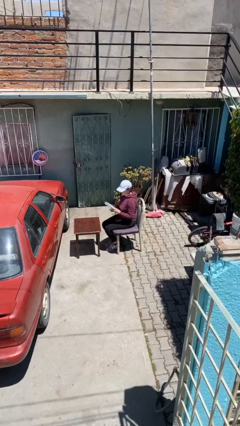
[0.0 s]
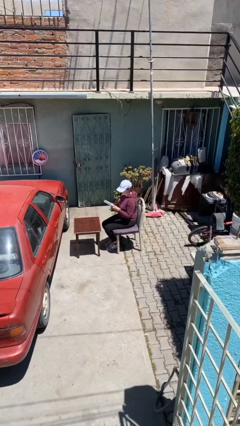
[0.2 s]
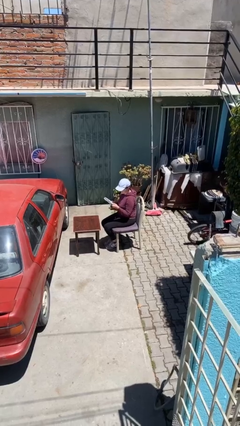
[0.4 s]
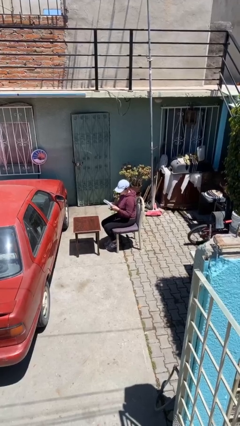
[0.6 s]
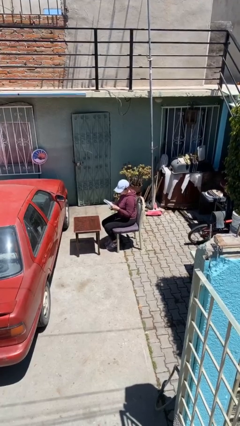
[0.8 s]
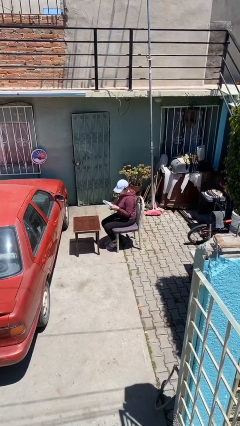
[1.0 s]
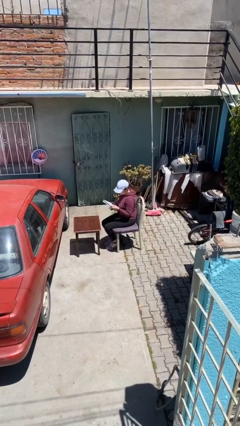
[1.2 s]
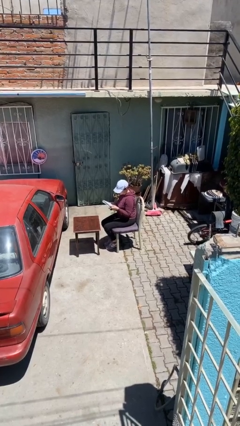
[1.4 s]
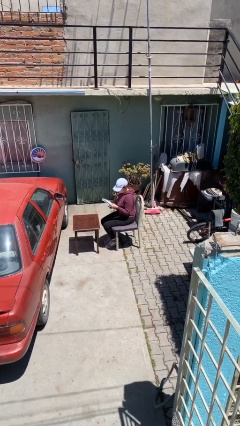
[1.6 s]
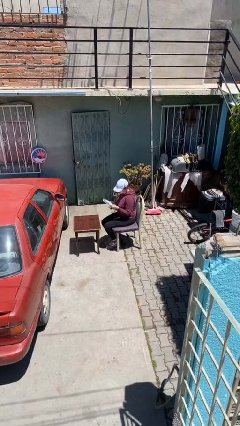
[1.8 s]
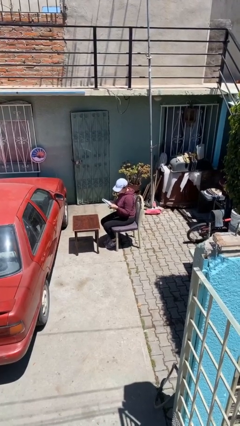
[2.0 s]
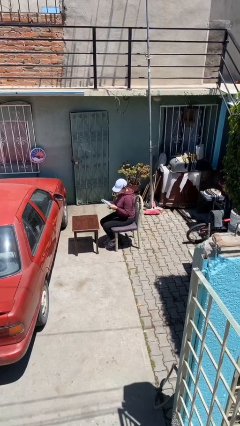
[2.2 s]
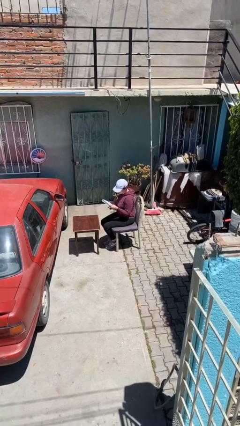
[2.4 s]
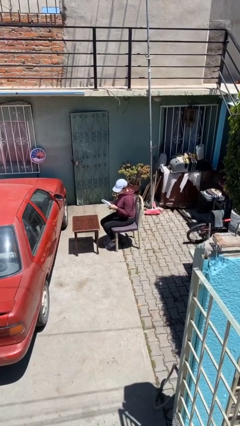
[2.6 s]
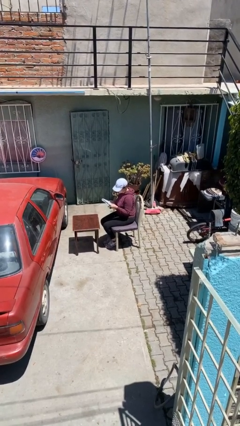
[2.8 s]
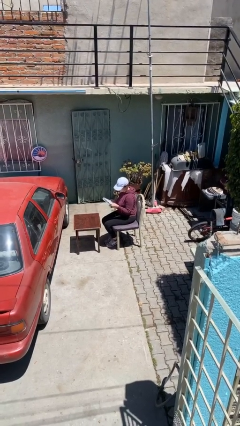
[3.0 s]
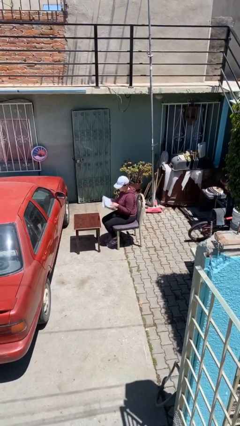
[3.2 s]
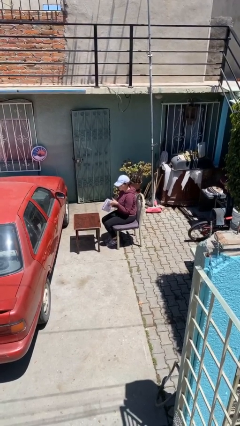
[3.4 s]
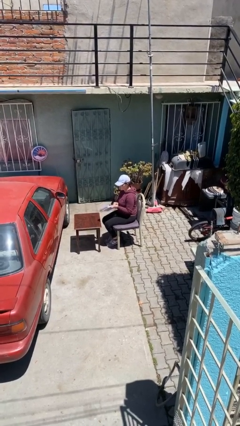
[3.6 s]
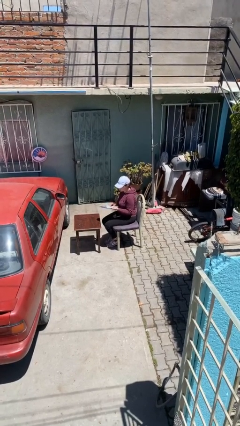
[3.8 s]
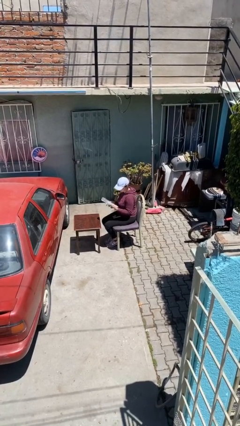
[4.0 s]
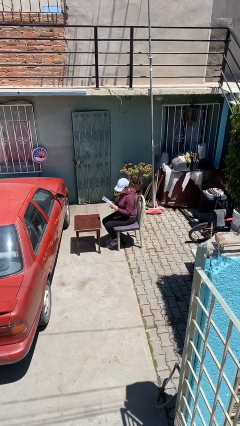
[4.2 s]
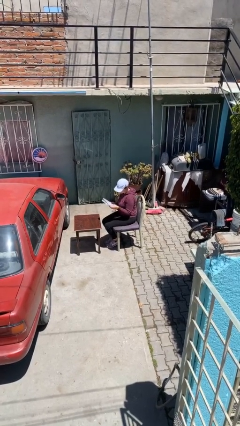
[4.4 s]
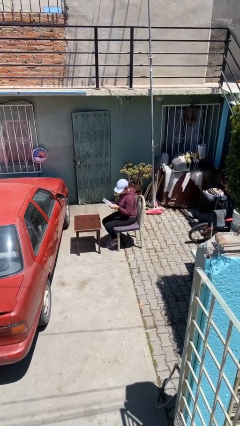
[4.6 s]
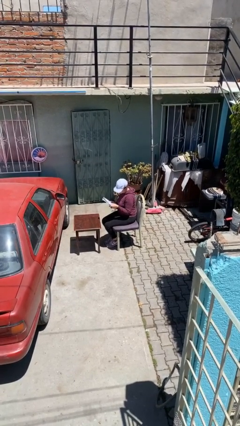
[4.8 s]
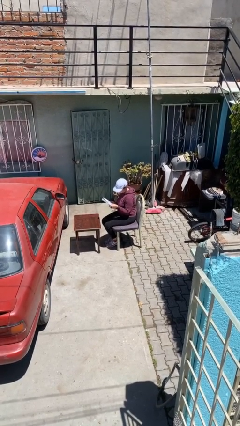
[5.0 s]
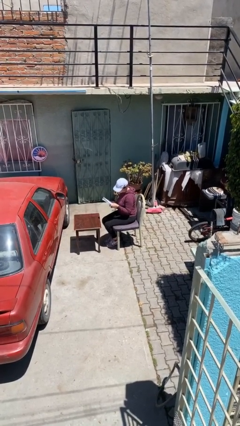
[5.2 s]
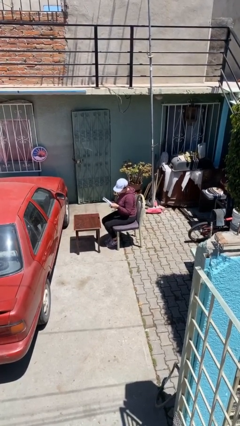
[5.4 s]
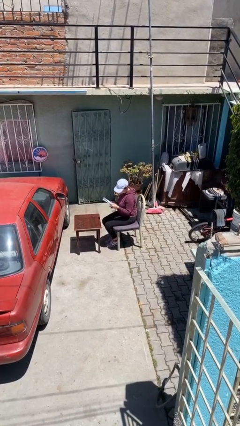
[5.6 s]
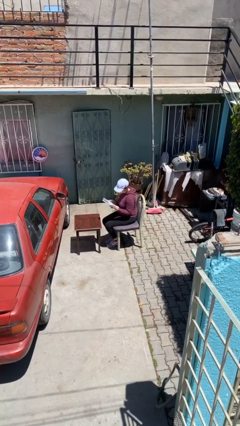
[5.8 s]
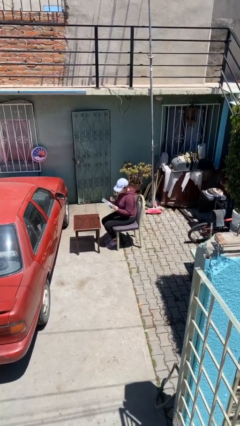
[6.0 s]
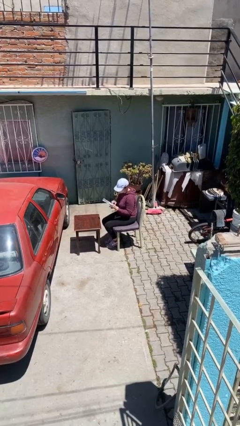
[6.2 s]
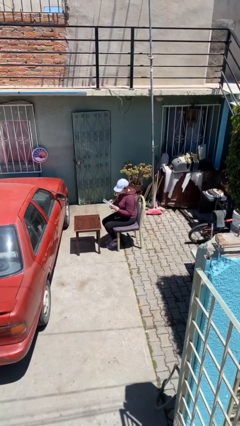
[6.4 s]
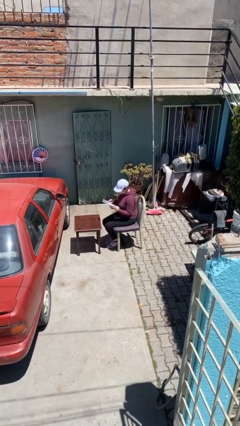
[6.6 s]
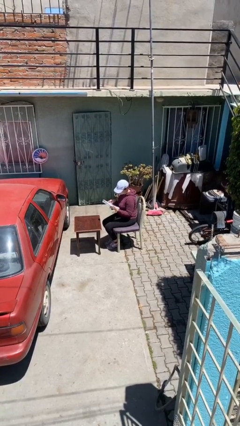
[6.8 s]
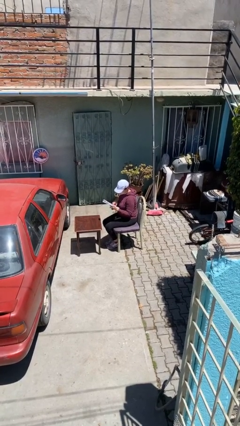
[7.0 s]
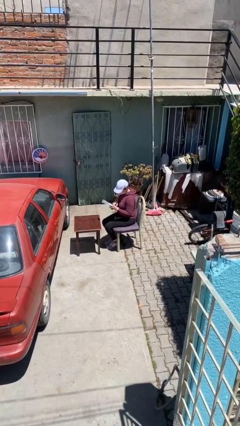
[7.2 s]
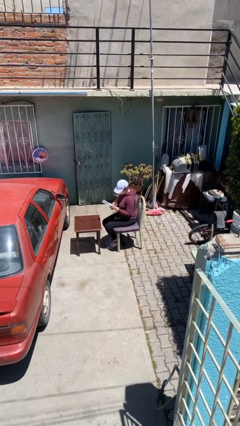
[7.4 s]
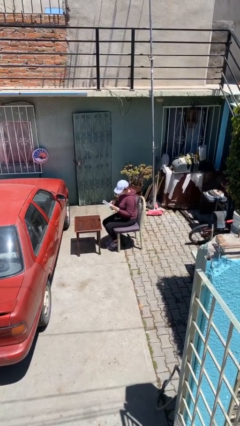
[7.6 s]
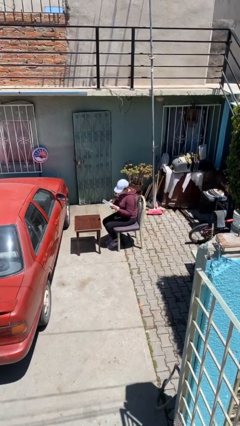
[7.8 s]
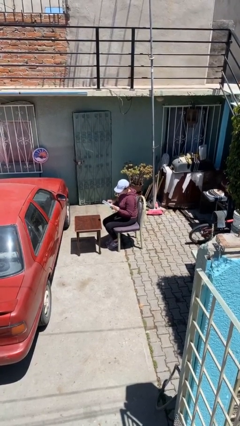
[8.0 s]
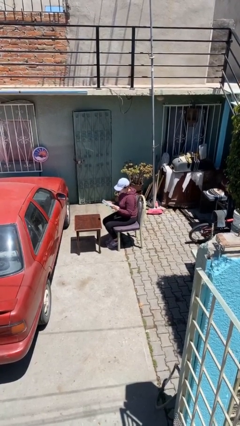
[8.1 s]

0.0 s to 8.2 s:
person reads document

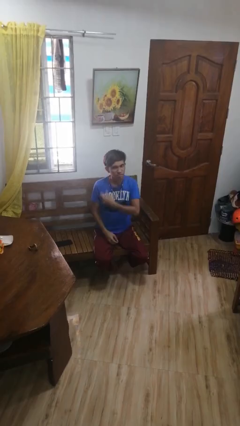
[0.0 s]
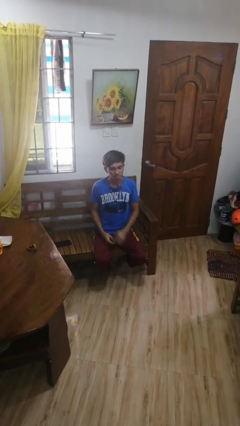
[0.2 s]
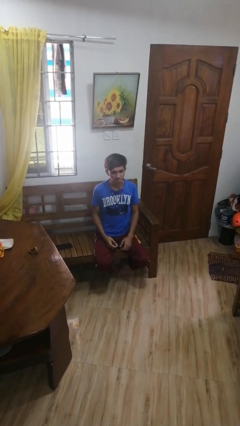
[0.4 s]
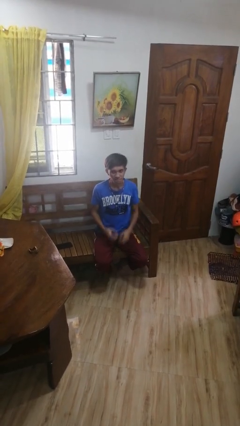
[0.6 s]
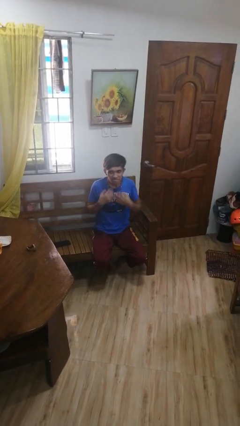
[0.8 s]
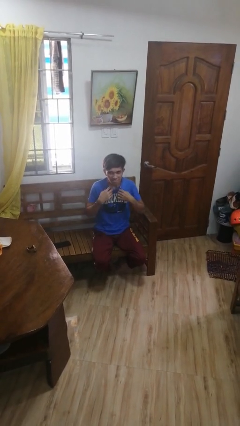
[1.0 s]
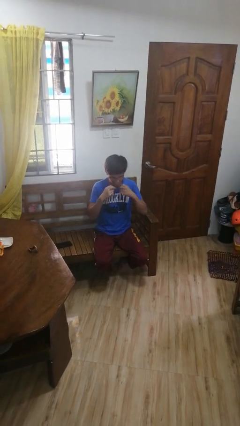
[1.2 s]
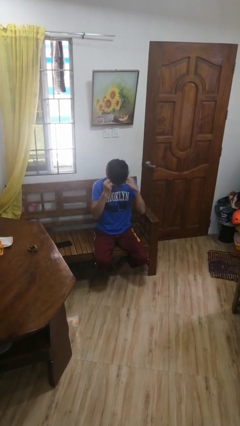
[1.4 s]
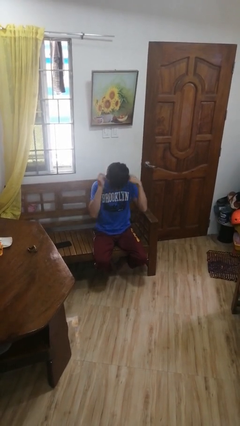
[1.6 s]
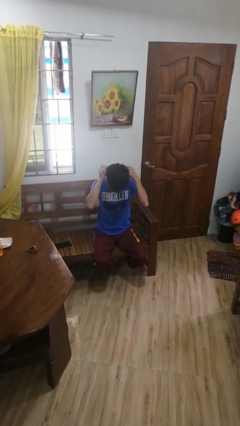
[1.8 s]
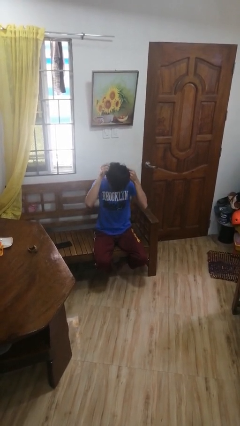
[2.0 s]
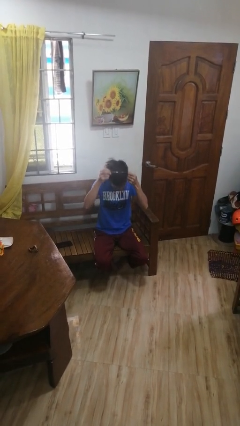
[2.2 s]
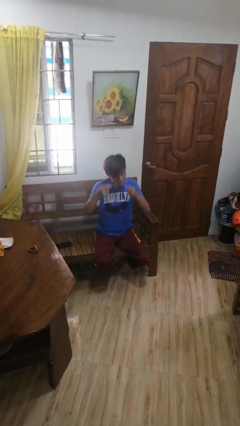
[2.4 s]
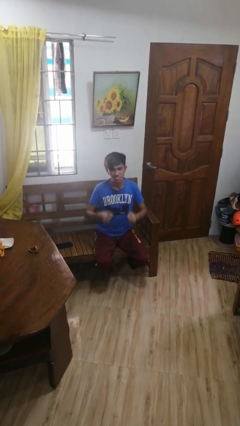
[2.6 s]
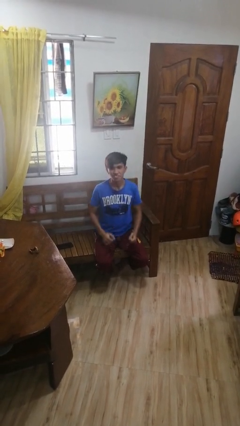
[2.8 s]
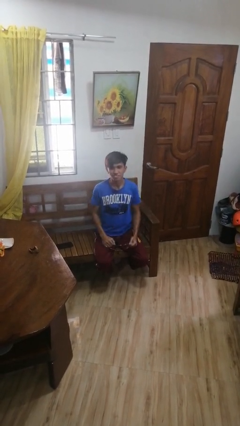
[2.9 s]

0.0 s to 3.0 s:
person takes off necklace

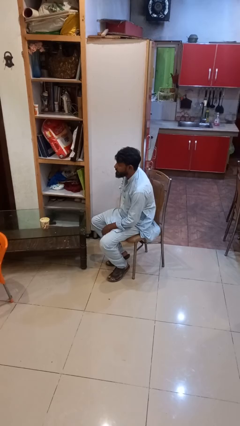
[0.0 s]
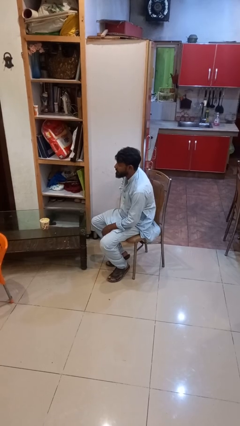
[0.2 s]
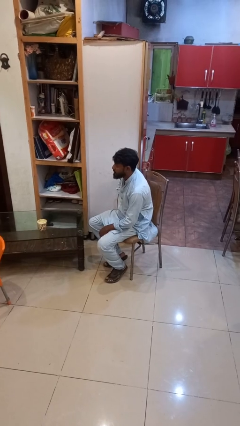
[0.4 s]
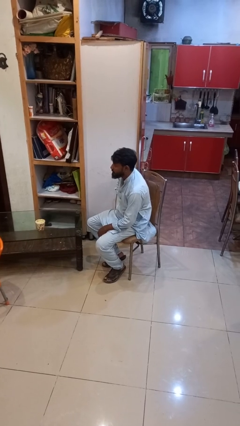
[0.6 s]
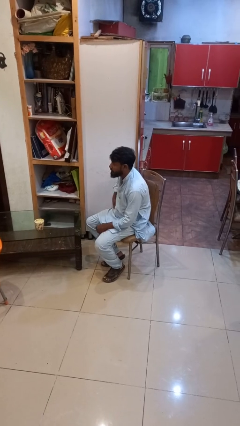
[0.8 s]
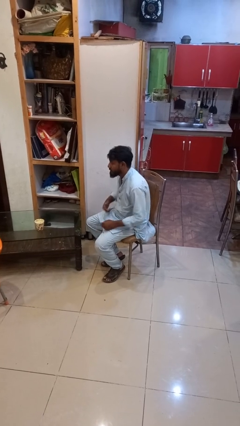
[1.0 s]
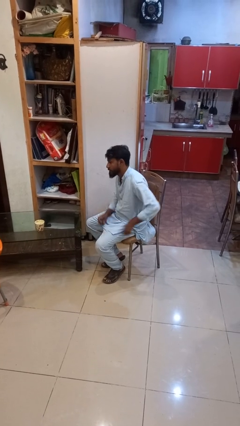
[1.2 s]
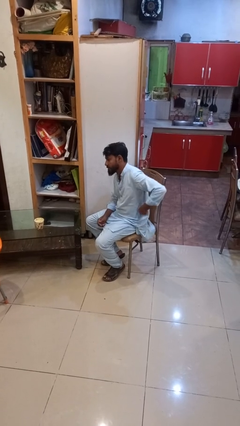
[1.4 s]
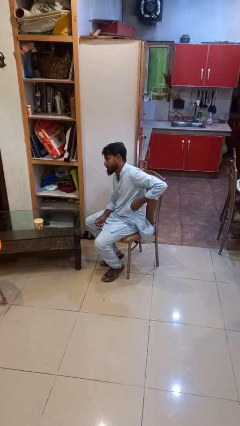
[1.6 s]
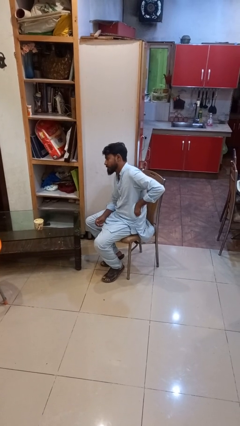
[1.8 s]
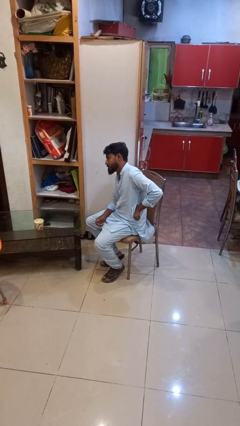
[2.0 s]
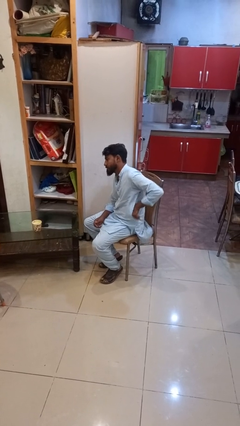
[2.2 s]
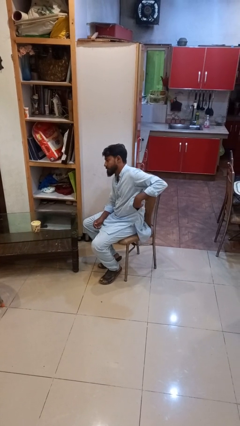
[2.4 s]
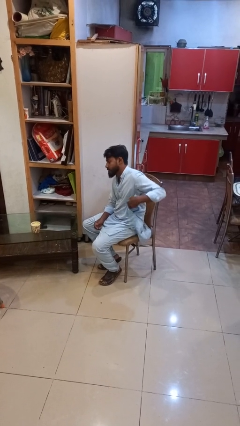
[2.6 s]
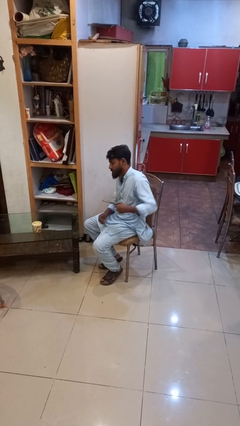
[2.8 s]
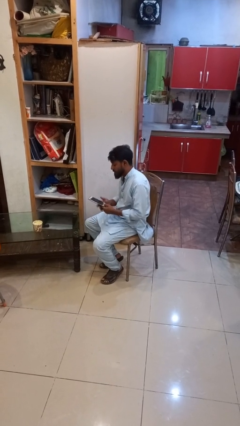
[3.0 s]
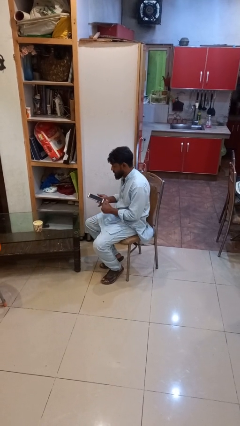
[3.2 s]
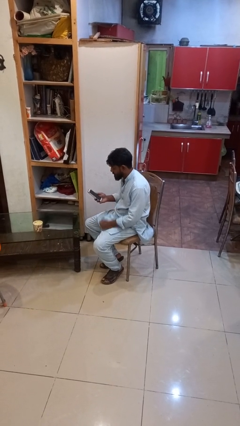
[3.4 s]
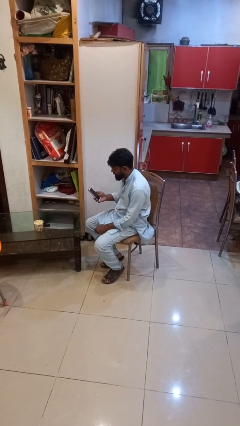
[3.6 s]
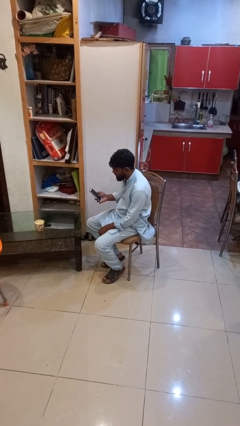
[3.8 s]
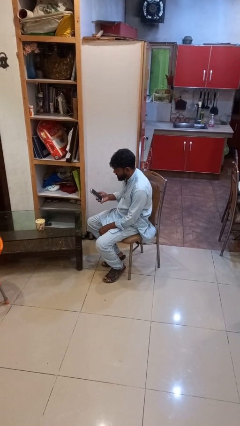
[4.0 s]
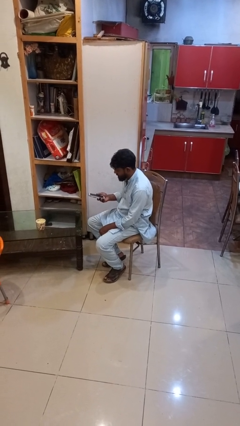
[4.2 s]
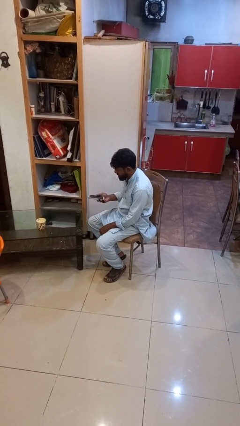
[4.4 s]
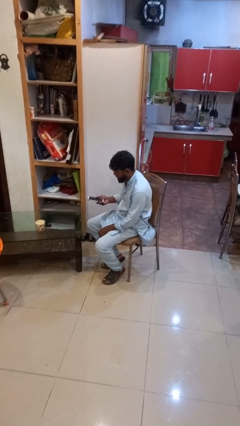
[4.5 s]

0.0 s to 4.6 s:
person takes phone from pocket

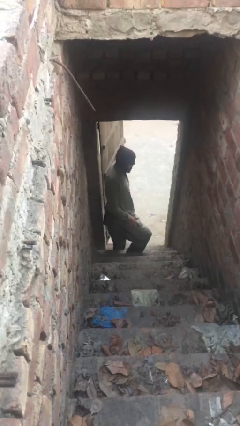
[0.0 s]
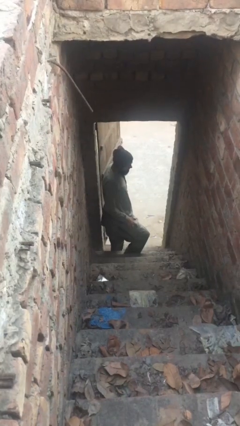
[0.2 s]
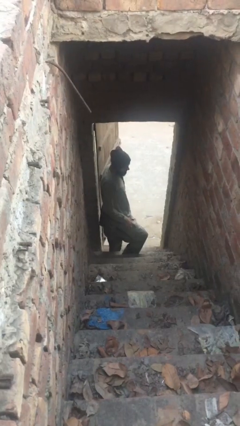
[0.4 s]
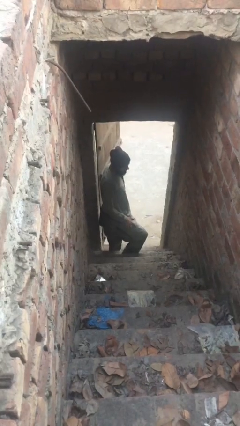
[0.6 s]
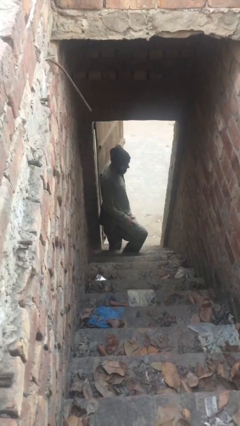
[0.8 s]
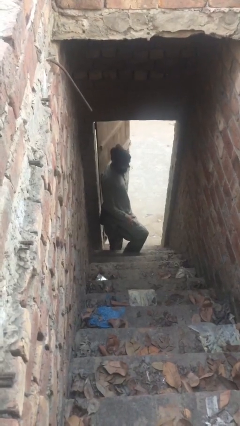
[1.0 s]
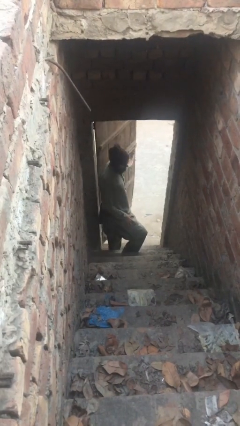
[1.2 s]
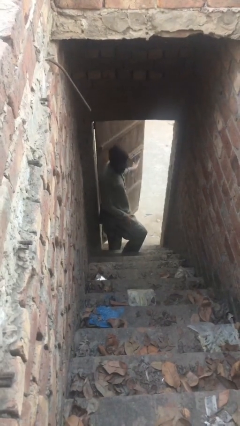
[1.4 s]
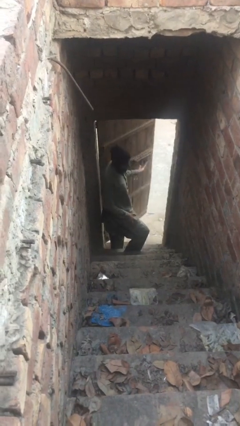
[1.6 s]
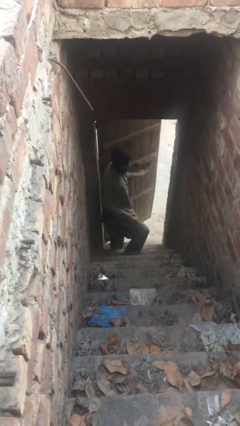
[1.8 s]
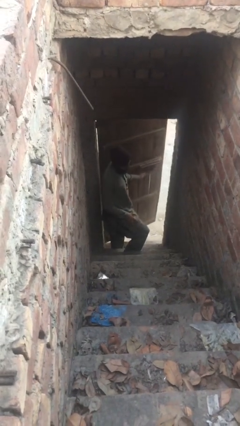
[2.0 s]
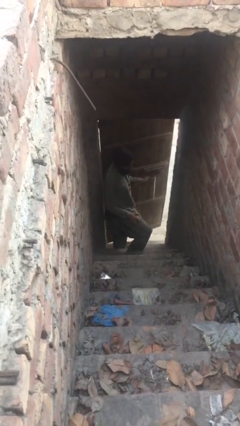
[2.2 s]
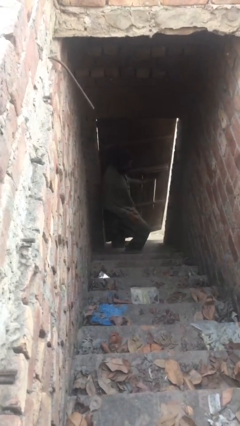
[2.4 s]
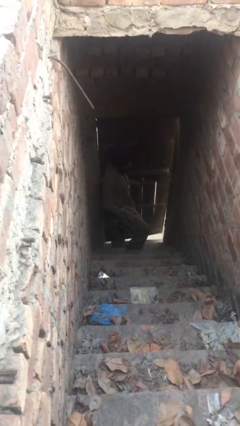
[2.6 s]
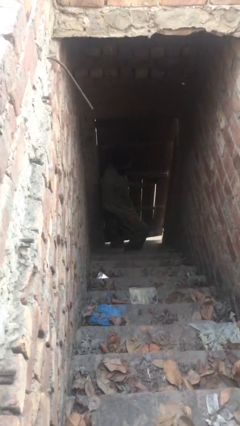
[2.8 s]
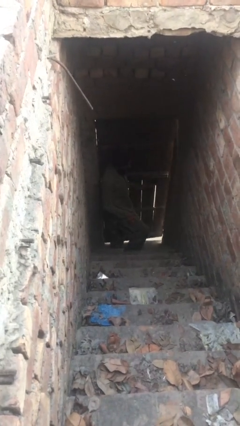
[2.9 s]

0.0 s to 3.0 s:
person closes facility door
